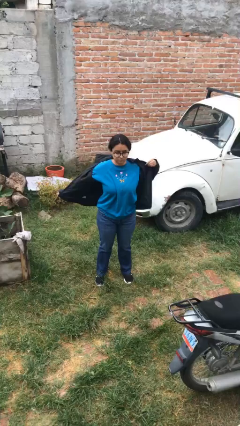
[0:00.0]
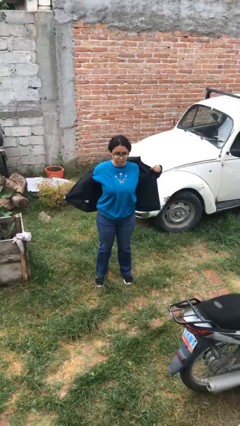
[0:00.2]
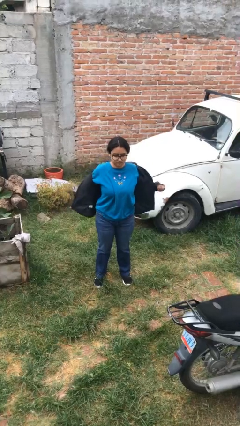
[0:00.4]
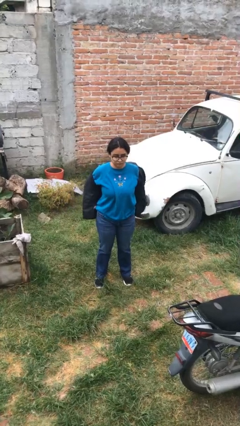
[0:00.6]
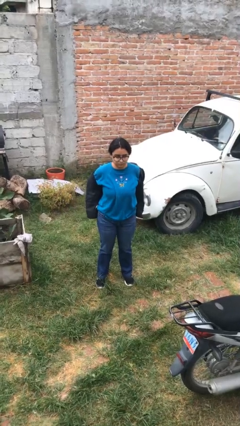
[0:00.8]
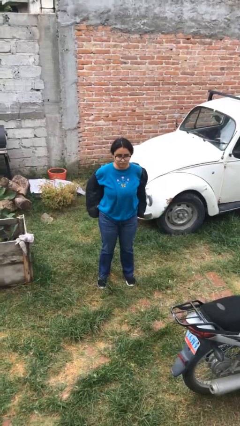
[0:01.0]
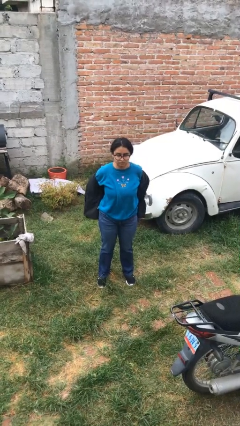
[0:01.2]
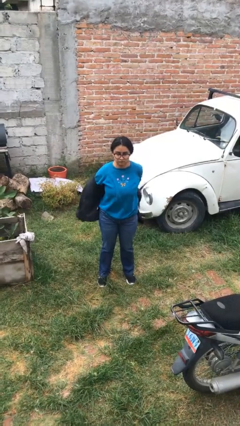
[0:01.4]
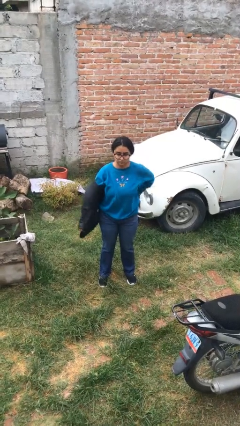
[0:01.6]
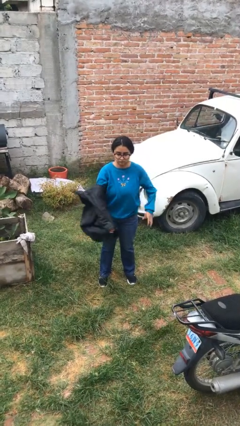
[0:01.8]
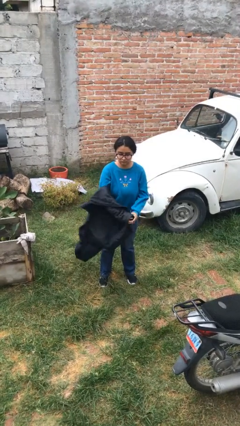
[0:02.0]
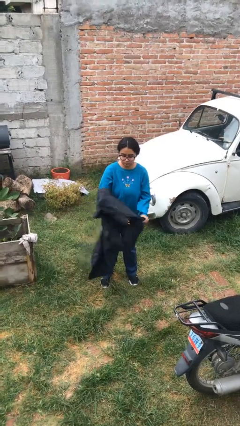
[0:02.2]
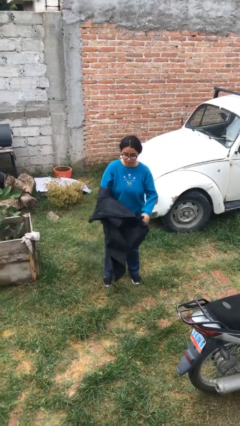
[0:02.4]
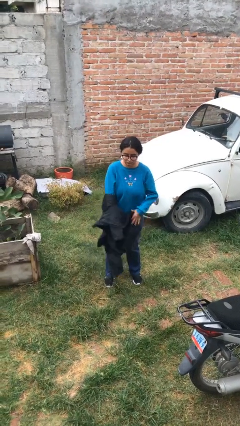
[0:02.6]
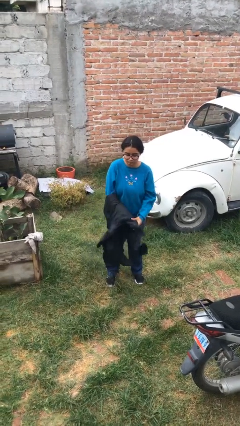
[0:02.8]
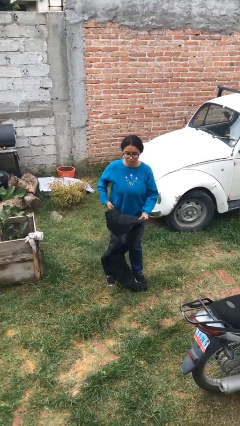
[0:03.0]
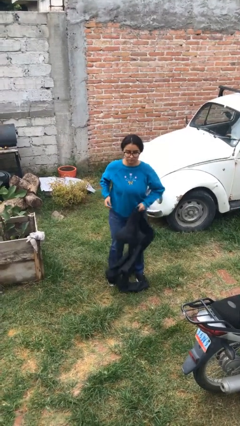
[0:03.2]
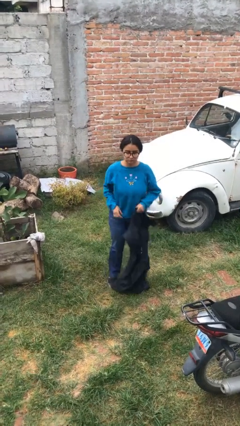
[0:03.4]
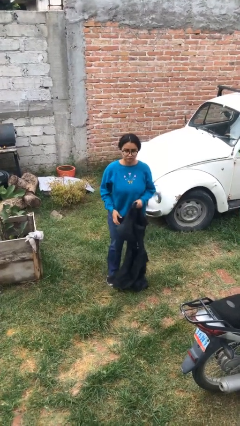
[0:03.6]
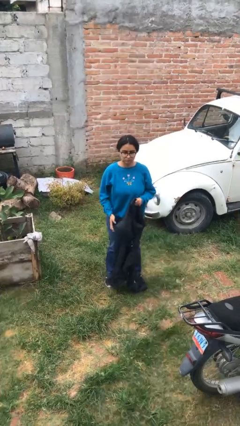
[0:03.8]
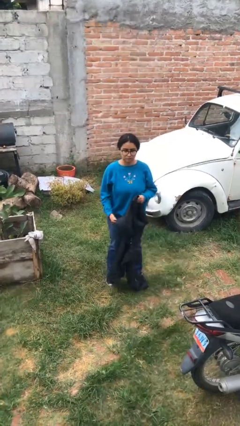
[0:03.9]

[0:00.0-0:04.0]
person takes off jacket

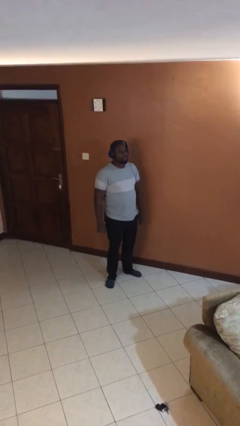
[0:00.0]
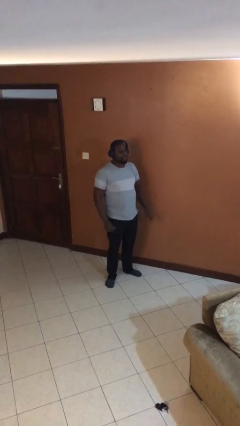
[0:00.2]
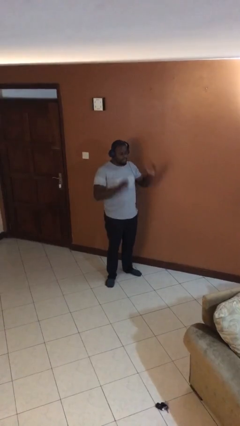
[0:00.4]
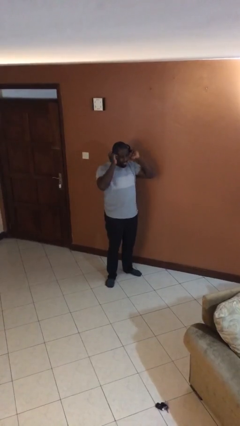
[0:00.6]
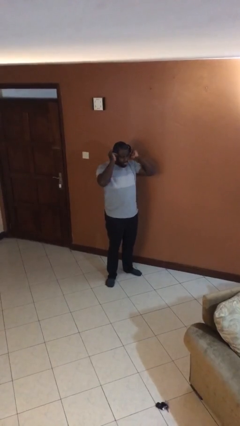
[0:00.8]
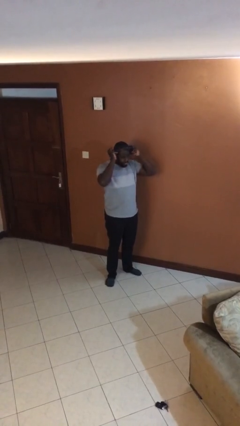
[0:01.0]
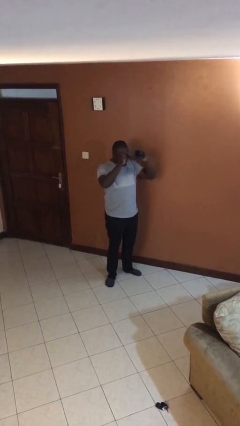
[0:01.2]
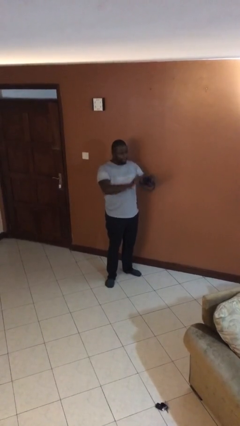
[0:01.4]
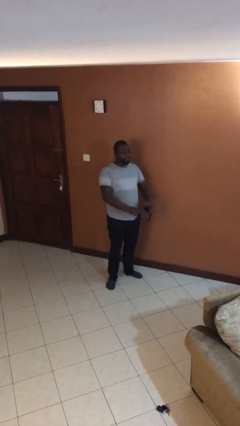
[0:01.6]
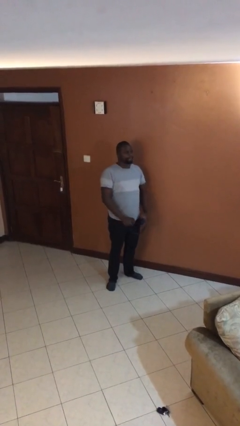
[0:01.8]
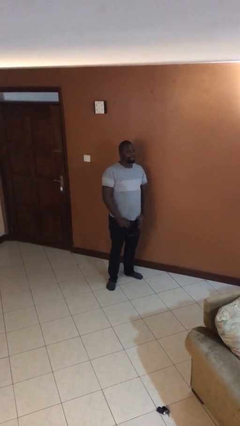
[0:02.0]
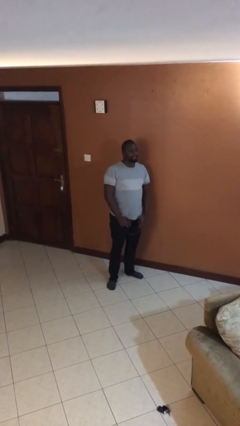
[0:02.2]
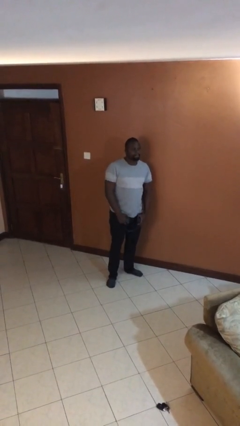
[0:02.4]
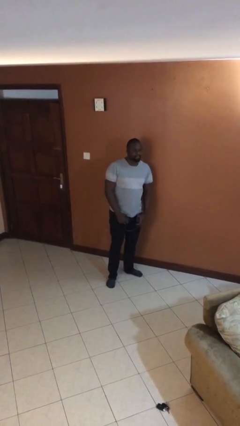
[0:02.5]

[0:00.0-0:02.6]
person takes off headphones

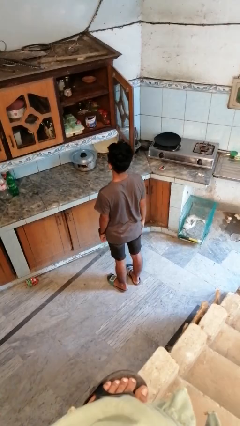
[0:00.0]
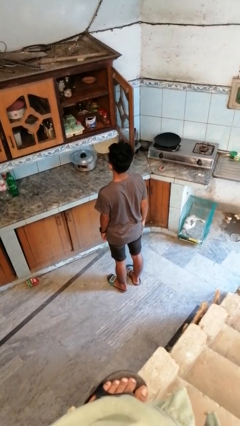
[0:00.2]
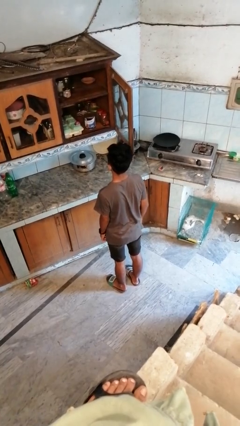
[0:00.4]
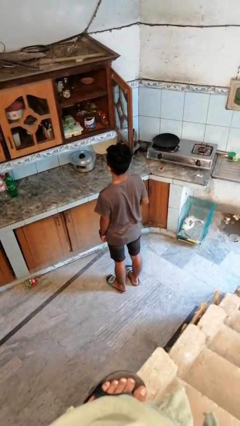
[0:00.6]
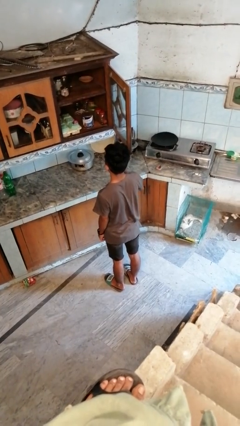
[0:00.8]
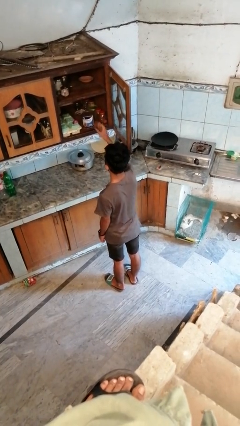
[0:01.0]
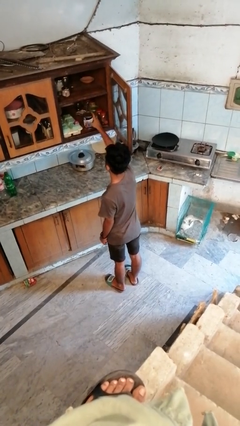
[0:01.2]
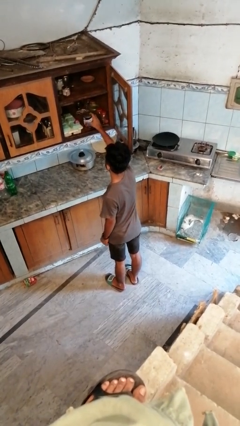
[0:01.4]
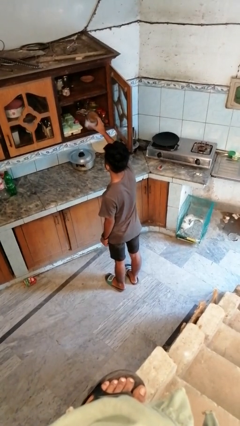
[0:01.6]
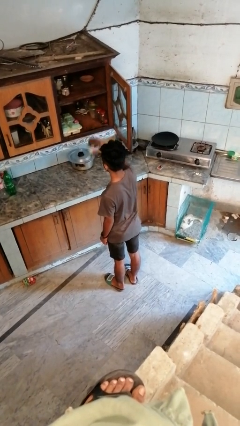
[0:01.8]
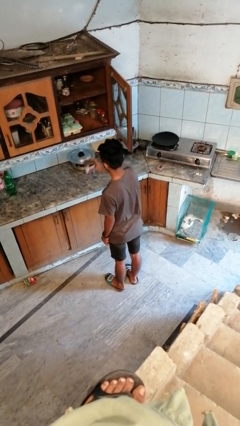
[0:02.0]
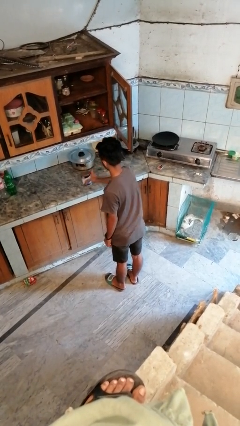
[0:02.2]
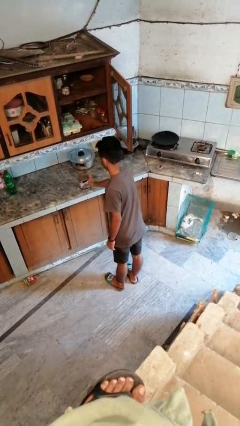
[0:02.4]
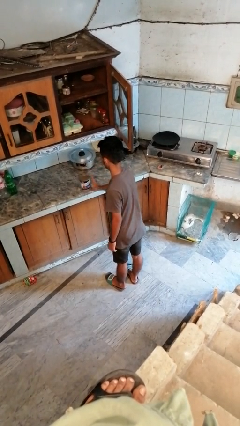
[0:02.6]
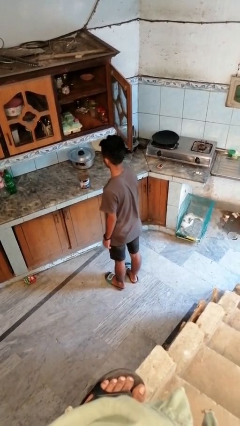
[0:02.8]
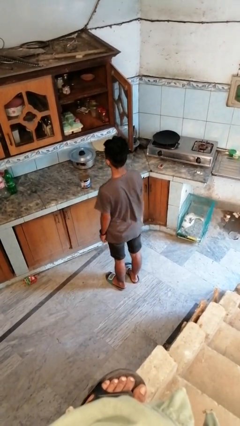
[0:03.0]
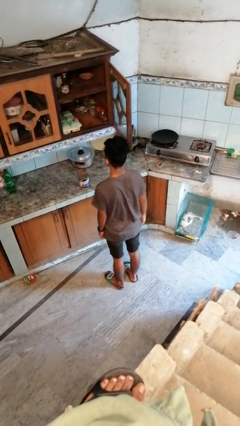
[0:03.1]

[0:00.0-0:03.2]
person takes object from cabinet

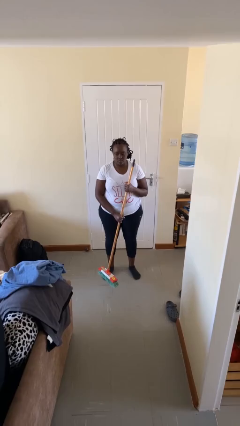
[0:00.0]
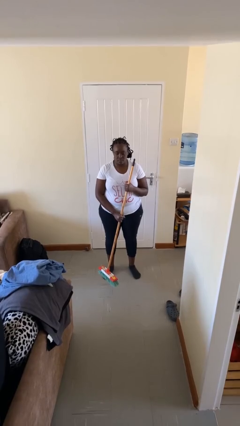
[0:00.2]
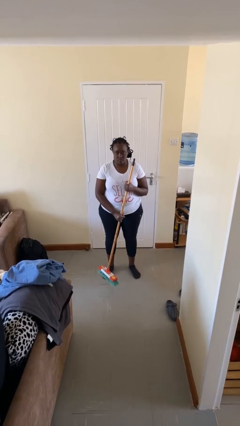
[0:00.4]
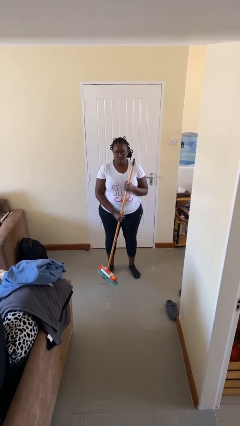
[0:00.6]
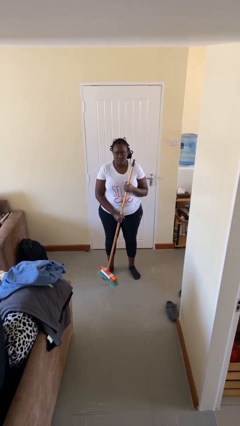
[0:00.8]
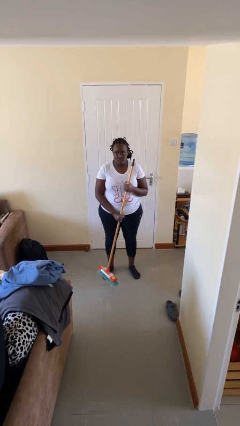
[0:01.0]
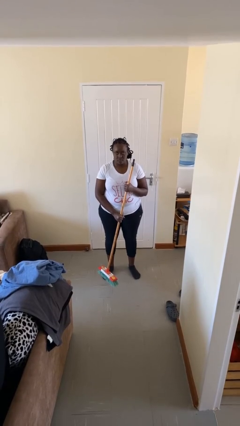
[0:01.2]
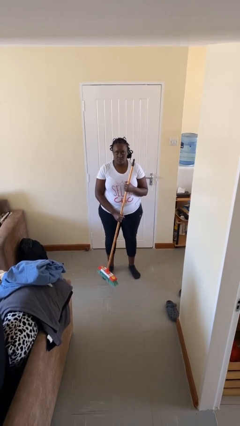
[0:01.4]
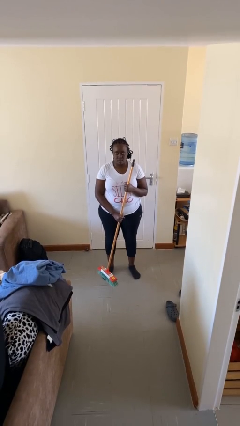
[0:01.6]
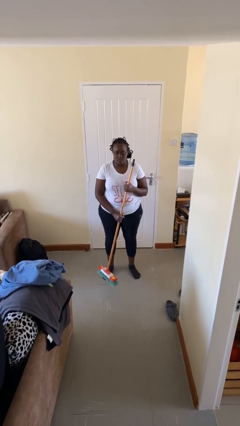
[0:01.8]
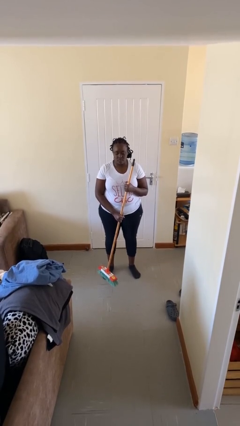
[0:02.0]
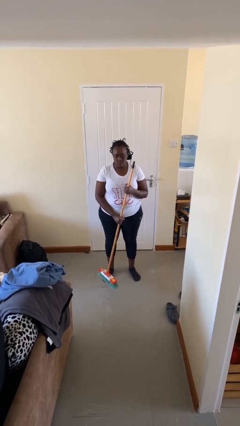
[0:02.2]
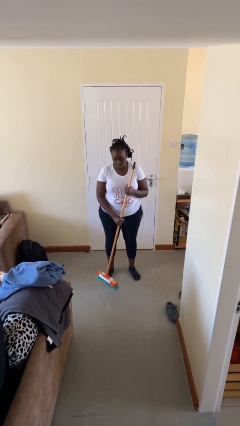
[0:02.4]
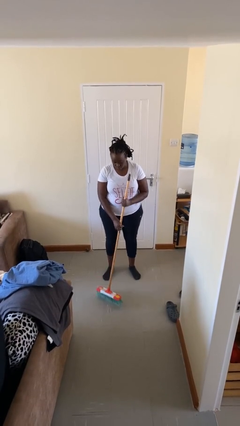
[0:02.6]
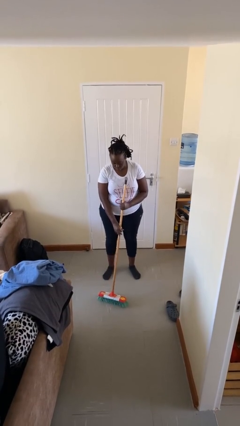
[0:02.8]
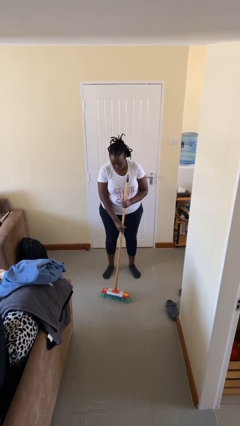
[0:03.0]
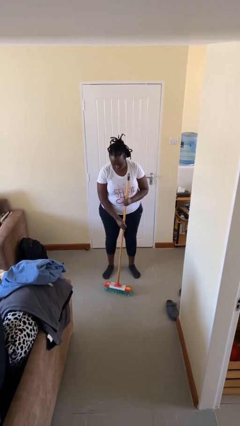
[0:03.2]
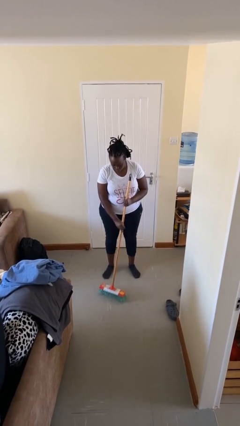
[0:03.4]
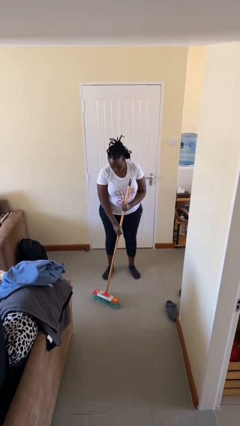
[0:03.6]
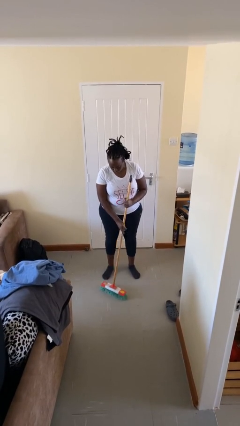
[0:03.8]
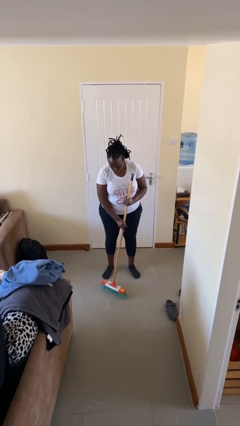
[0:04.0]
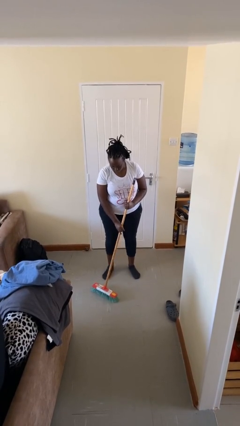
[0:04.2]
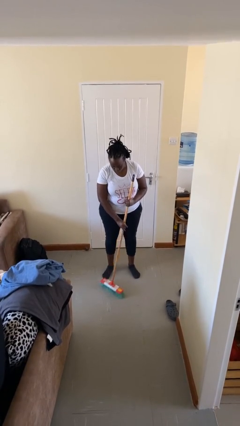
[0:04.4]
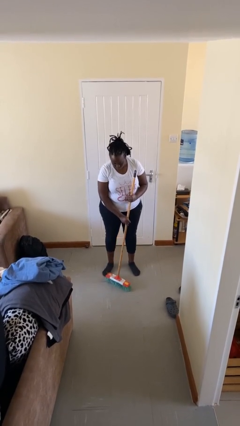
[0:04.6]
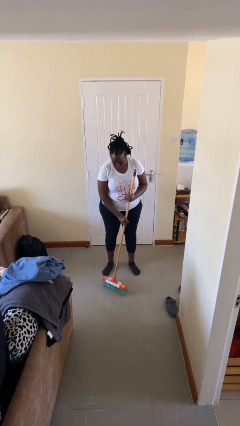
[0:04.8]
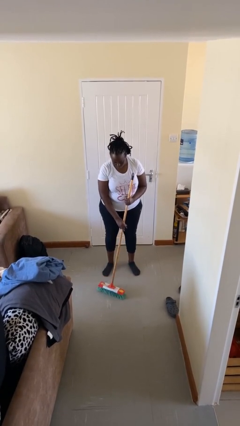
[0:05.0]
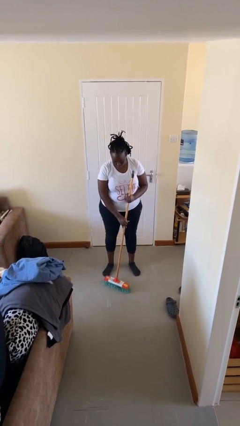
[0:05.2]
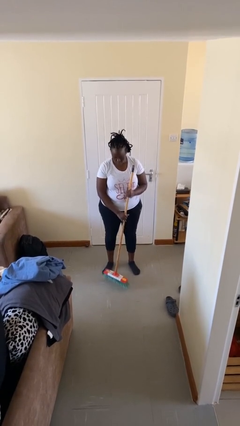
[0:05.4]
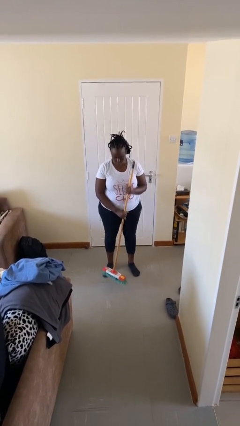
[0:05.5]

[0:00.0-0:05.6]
person sweeps floor

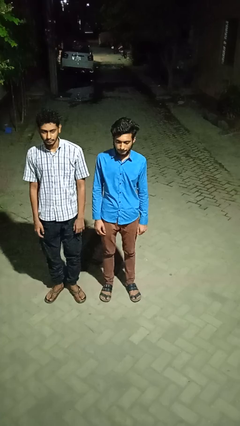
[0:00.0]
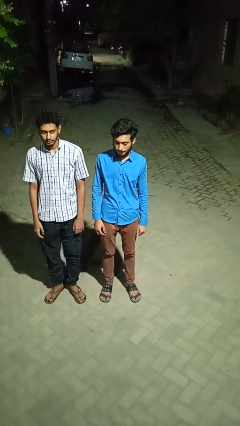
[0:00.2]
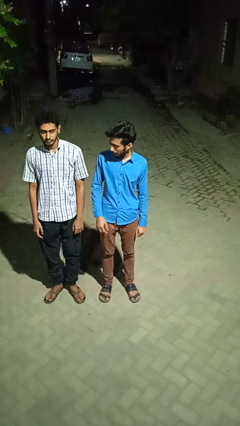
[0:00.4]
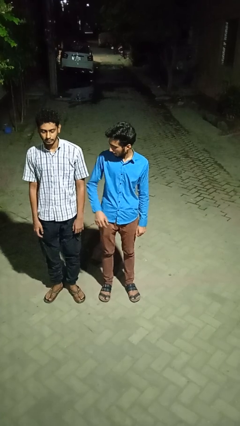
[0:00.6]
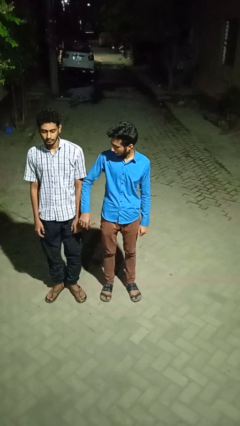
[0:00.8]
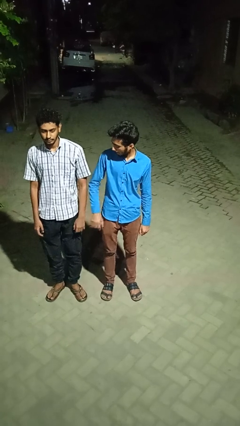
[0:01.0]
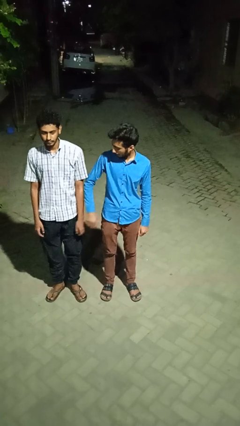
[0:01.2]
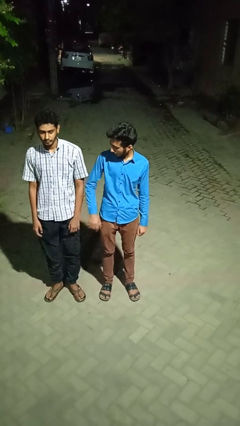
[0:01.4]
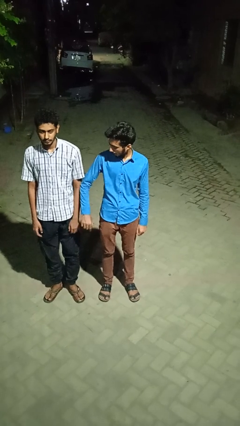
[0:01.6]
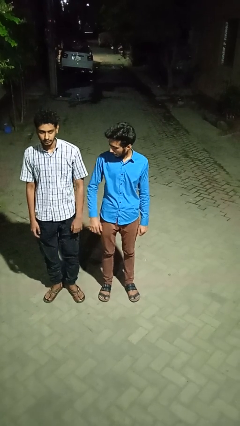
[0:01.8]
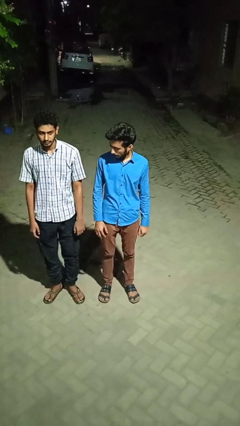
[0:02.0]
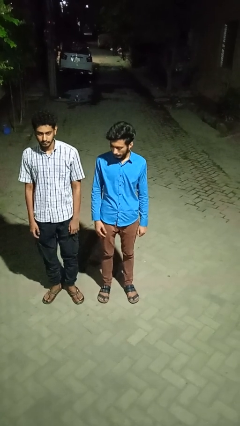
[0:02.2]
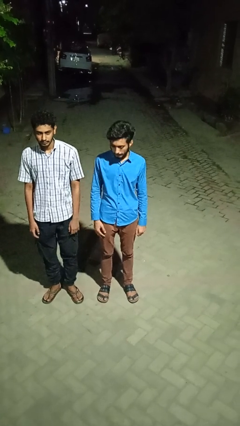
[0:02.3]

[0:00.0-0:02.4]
person nudges person with elbow
